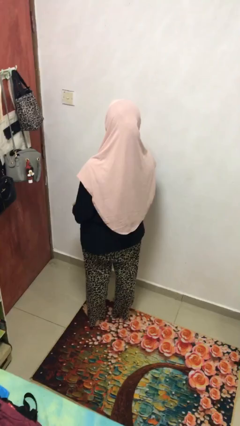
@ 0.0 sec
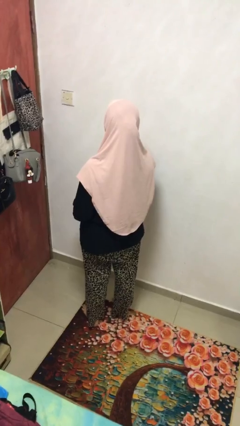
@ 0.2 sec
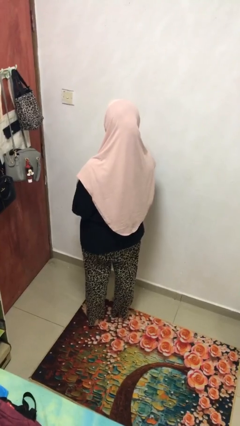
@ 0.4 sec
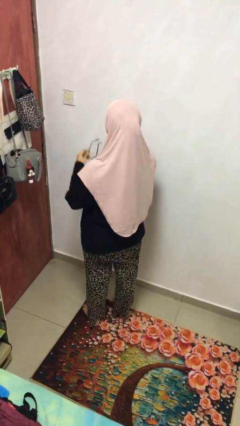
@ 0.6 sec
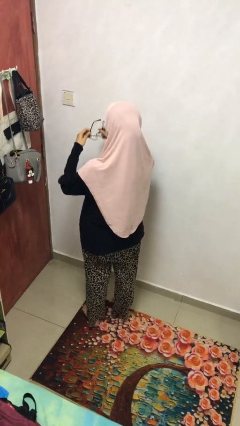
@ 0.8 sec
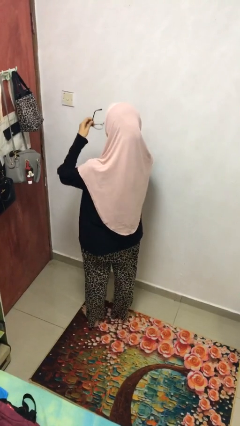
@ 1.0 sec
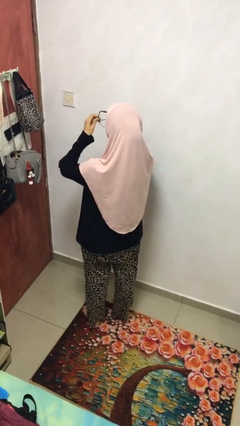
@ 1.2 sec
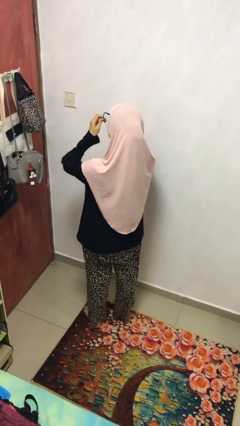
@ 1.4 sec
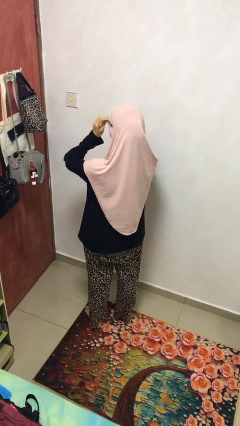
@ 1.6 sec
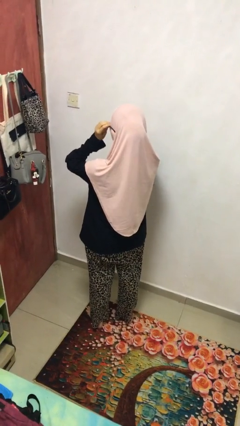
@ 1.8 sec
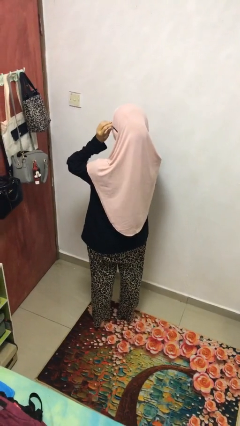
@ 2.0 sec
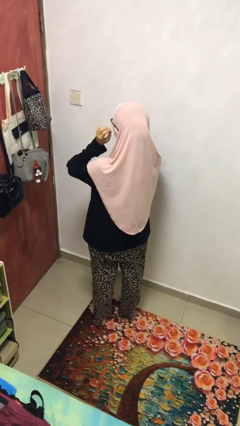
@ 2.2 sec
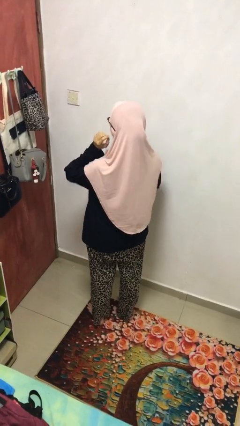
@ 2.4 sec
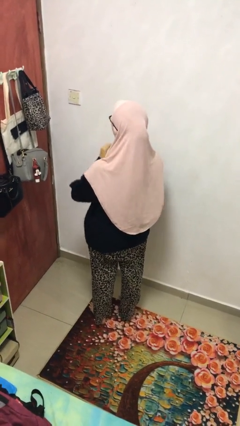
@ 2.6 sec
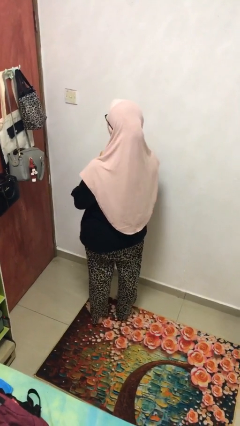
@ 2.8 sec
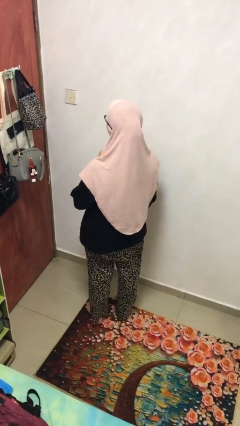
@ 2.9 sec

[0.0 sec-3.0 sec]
person puts on glasses

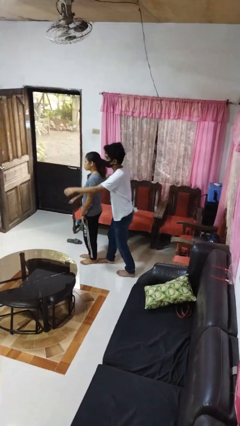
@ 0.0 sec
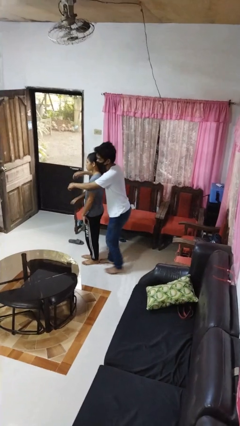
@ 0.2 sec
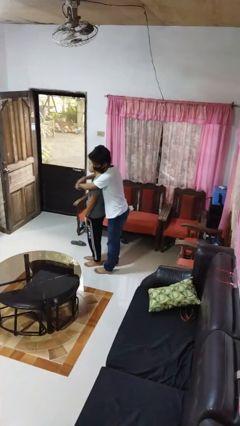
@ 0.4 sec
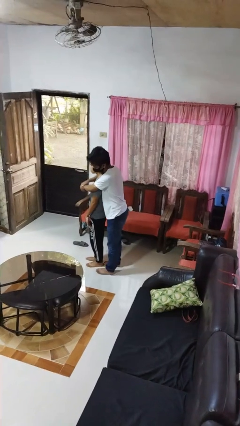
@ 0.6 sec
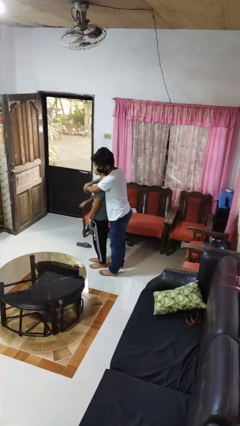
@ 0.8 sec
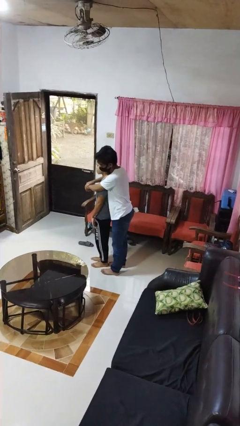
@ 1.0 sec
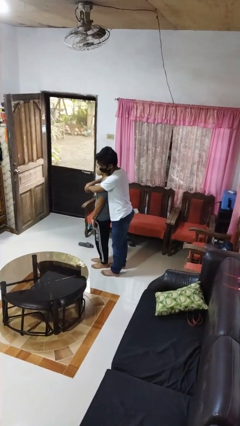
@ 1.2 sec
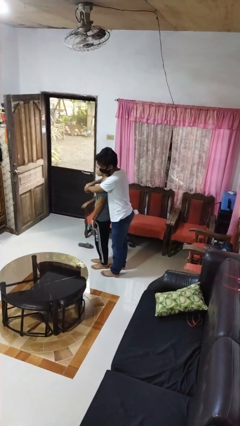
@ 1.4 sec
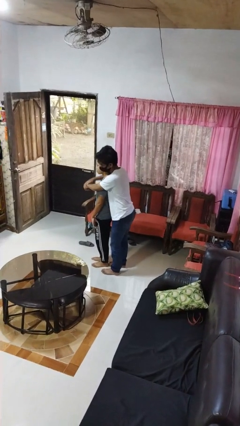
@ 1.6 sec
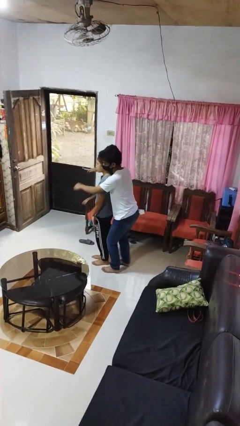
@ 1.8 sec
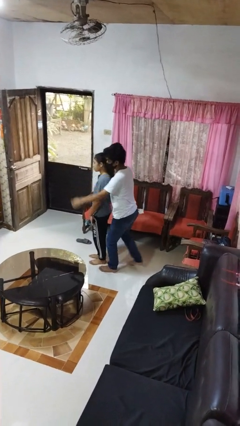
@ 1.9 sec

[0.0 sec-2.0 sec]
person hugs person from behind

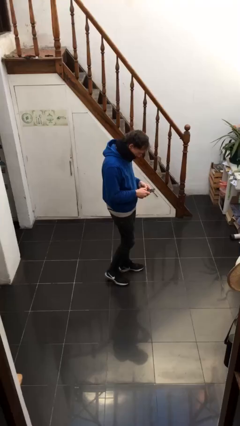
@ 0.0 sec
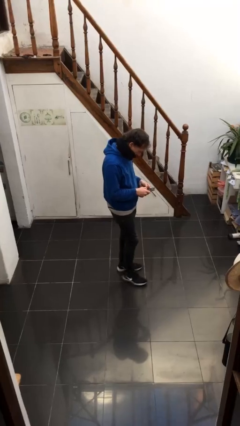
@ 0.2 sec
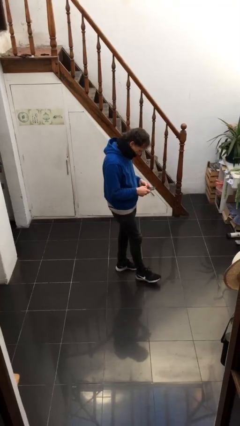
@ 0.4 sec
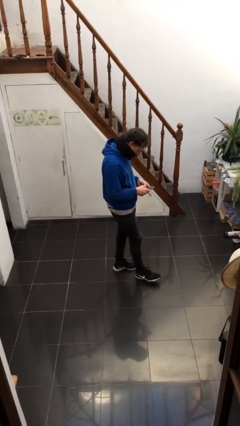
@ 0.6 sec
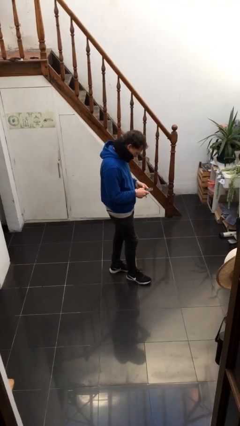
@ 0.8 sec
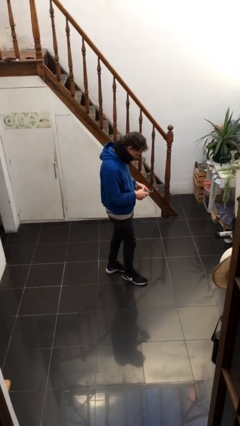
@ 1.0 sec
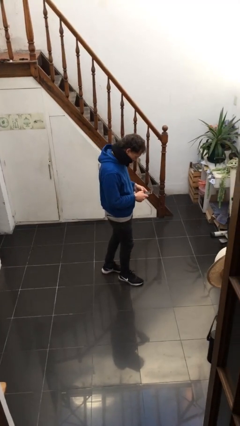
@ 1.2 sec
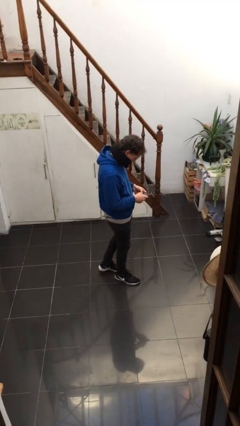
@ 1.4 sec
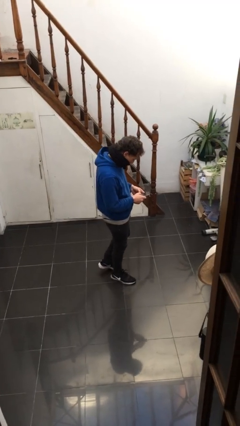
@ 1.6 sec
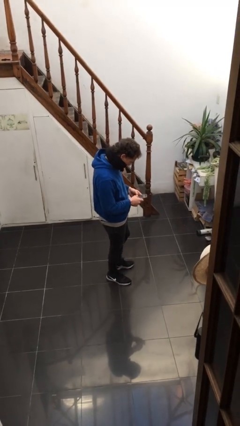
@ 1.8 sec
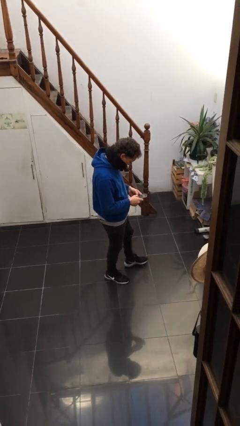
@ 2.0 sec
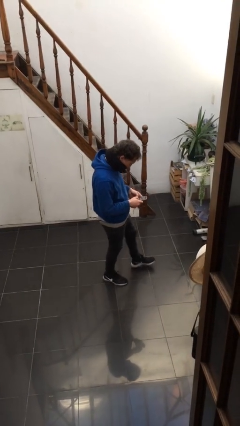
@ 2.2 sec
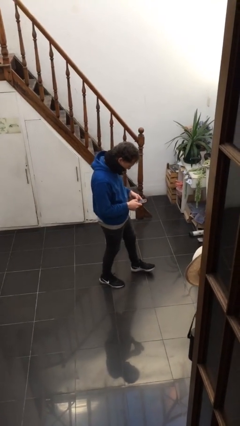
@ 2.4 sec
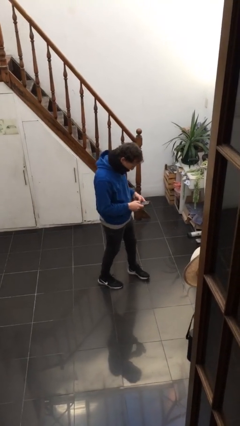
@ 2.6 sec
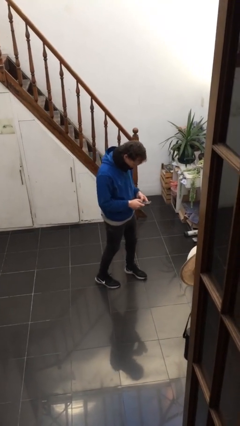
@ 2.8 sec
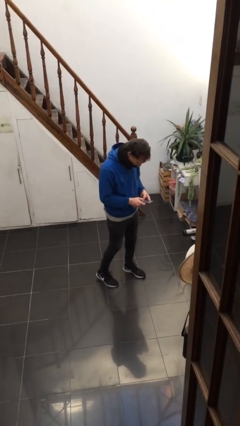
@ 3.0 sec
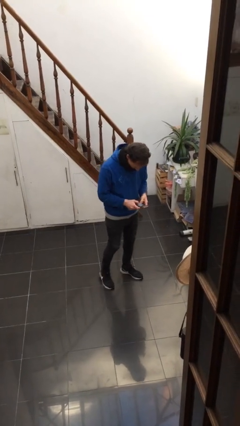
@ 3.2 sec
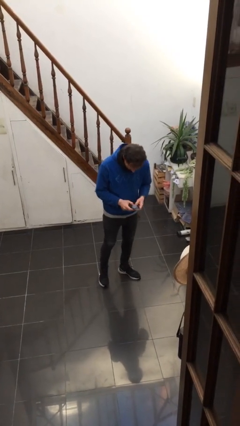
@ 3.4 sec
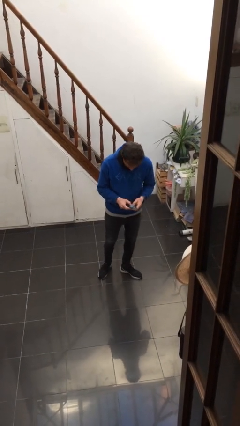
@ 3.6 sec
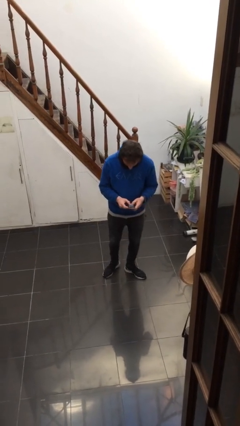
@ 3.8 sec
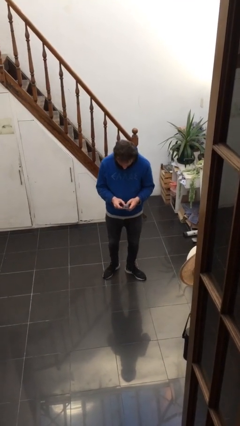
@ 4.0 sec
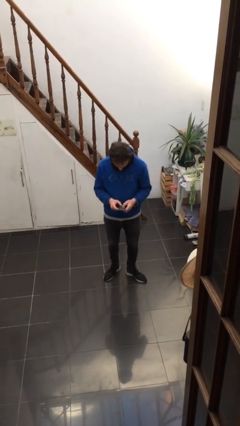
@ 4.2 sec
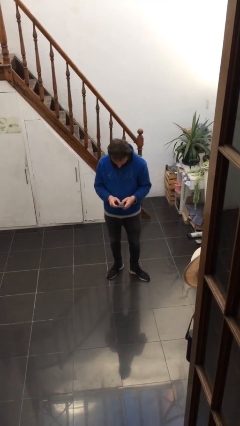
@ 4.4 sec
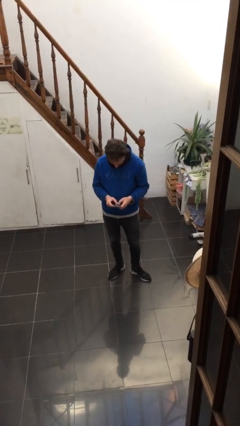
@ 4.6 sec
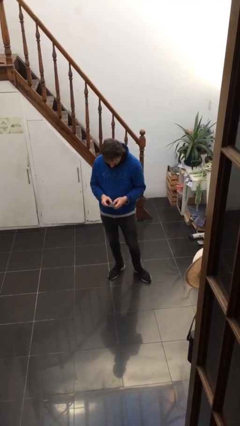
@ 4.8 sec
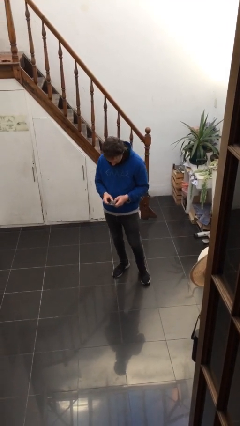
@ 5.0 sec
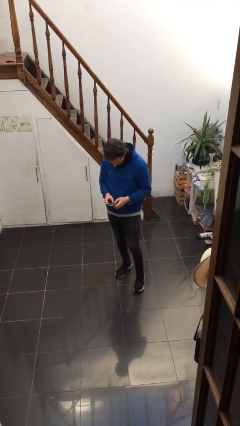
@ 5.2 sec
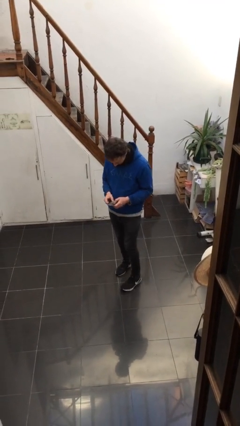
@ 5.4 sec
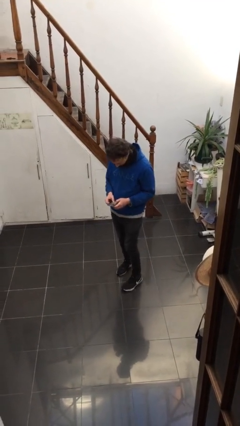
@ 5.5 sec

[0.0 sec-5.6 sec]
person texts on phone

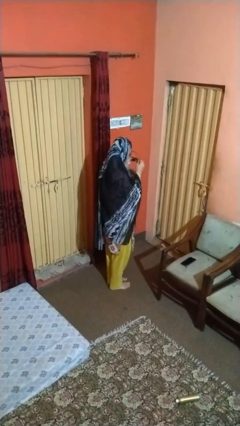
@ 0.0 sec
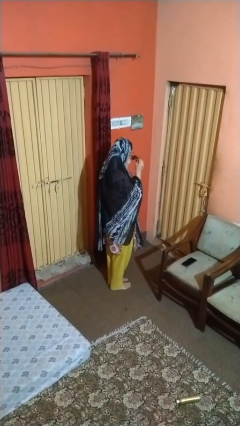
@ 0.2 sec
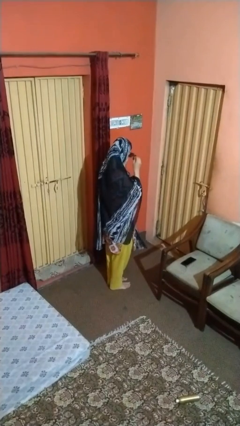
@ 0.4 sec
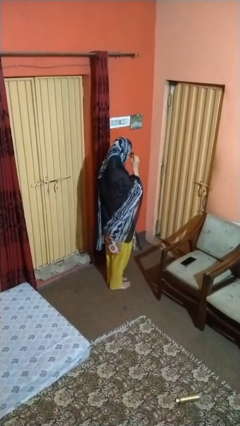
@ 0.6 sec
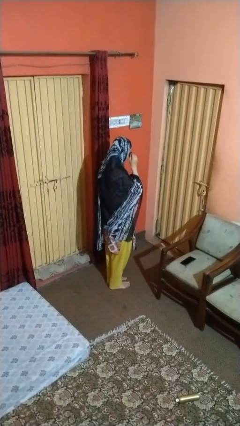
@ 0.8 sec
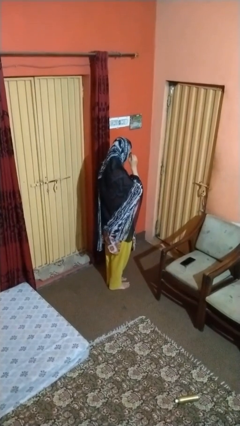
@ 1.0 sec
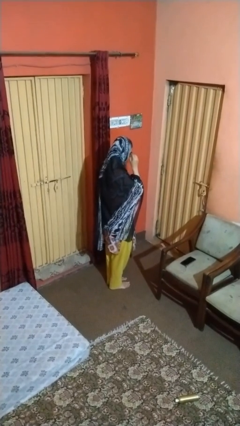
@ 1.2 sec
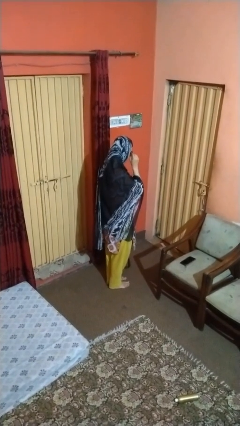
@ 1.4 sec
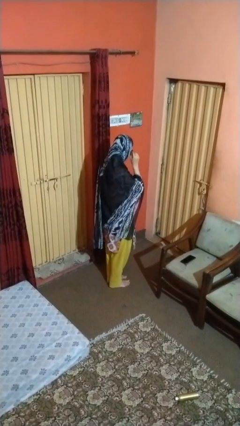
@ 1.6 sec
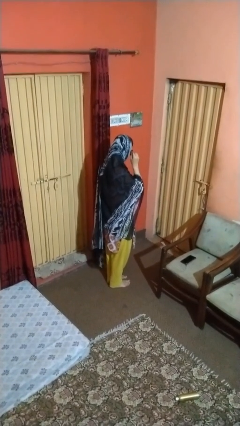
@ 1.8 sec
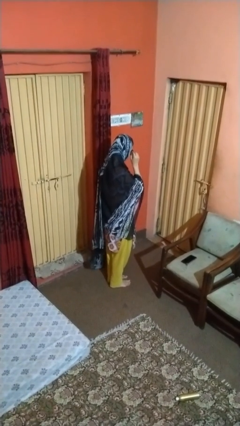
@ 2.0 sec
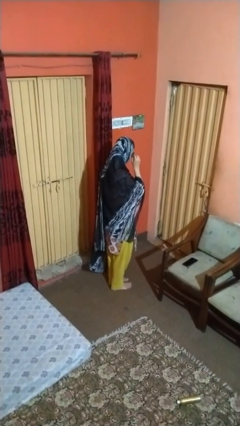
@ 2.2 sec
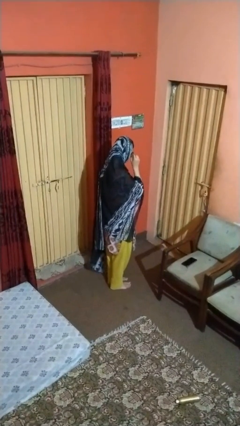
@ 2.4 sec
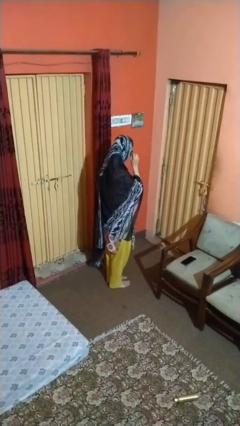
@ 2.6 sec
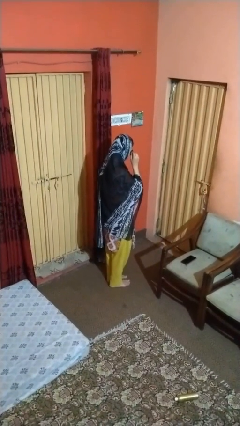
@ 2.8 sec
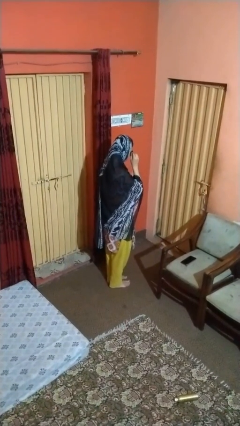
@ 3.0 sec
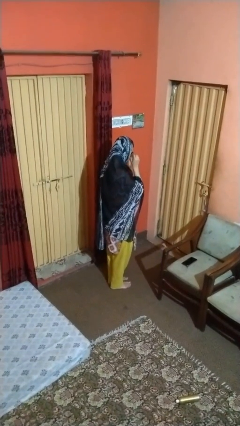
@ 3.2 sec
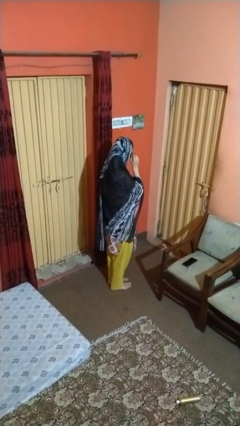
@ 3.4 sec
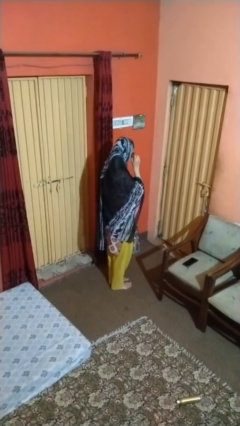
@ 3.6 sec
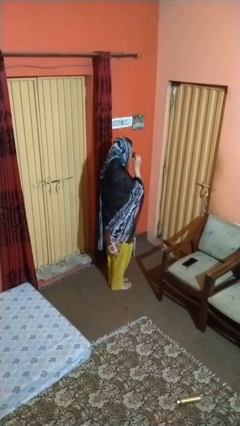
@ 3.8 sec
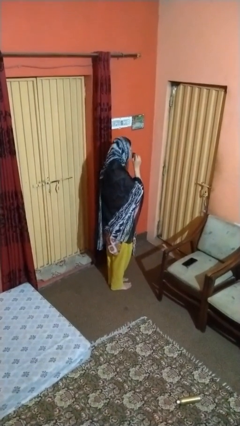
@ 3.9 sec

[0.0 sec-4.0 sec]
person puts on sunglasses

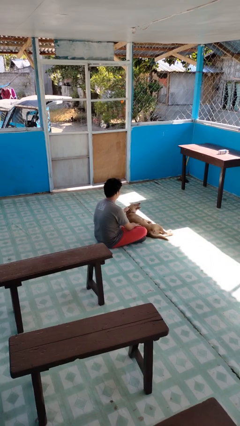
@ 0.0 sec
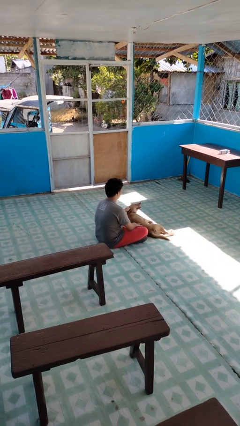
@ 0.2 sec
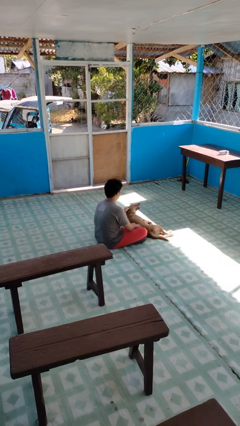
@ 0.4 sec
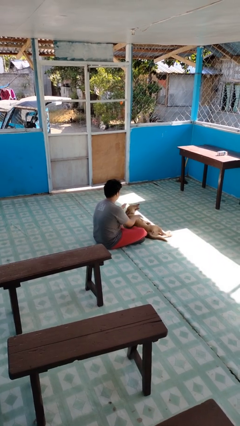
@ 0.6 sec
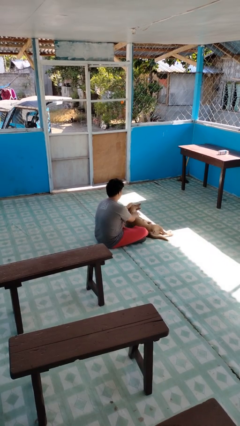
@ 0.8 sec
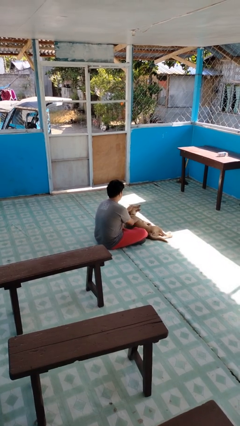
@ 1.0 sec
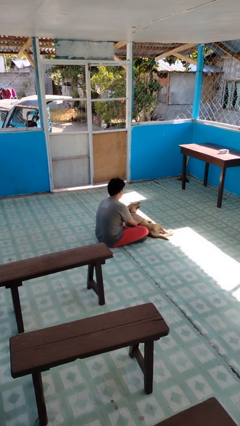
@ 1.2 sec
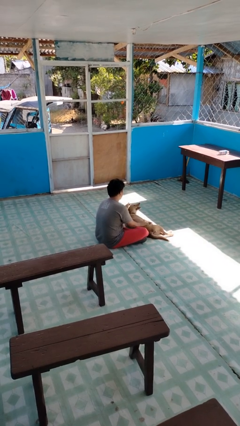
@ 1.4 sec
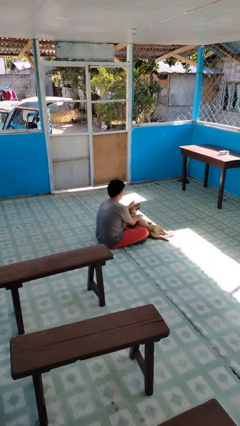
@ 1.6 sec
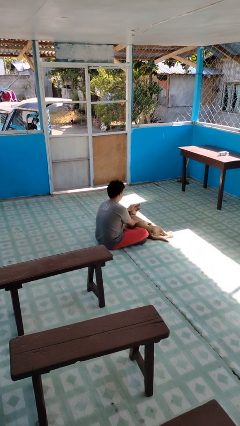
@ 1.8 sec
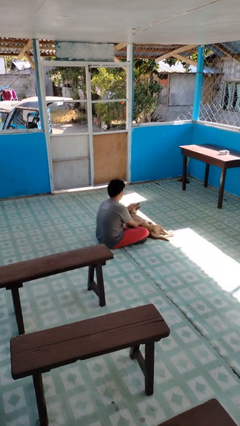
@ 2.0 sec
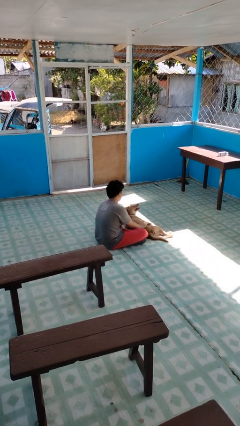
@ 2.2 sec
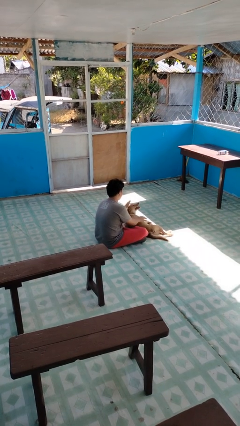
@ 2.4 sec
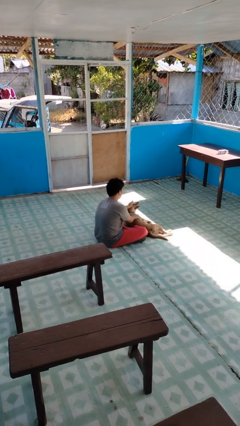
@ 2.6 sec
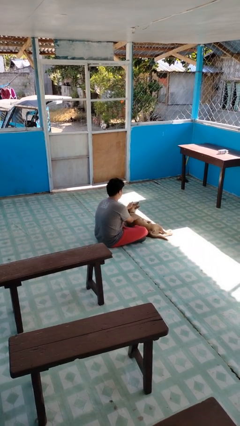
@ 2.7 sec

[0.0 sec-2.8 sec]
person pets dog

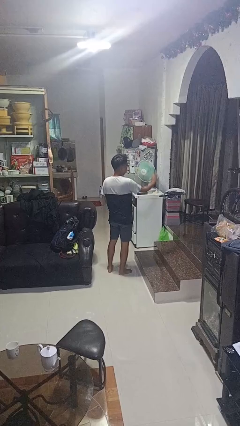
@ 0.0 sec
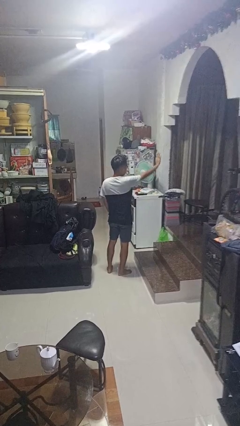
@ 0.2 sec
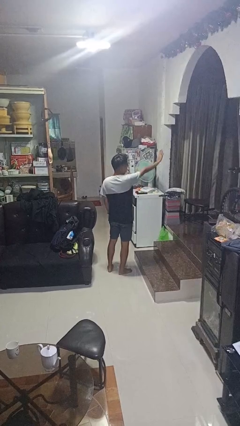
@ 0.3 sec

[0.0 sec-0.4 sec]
person gestures stop
